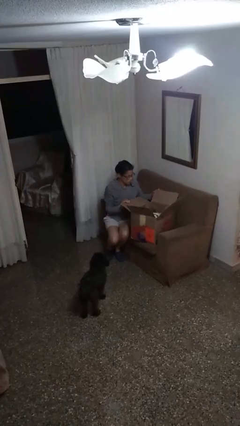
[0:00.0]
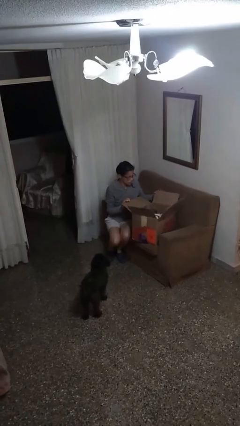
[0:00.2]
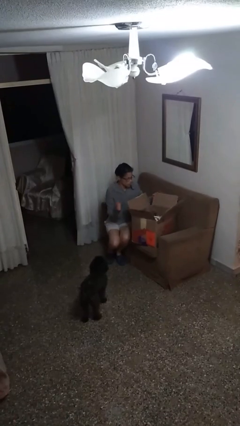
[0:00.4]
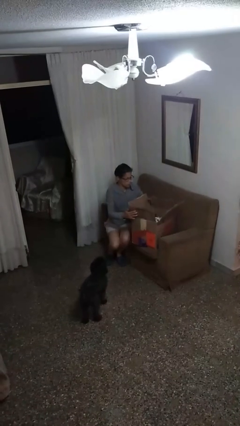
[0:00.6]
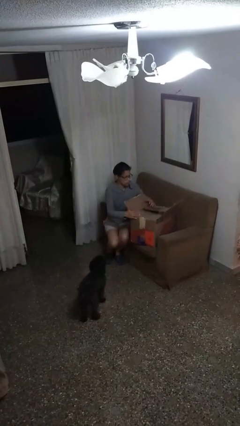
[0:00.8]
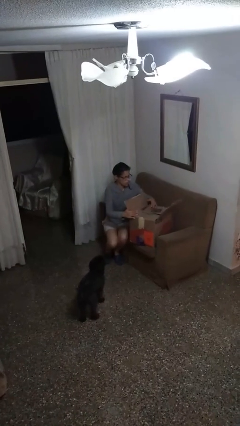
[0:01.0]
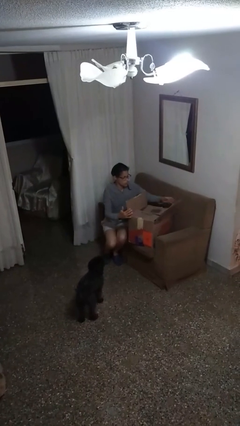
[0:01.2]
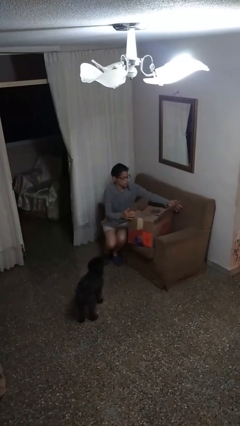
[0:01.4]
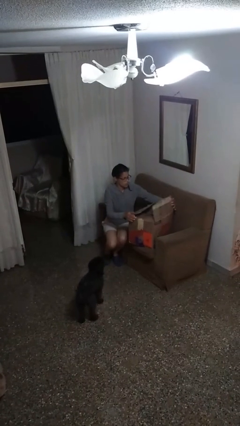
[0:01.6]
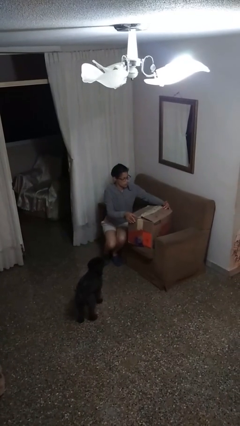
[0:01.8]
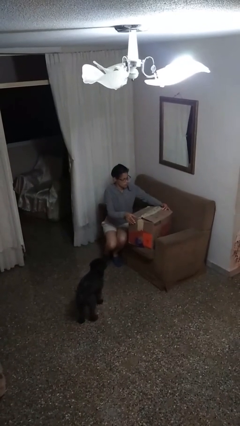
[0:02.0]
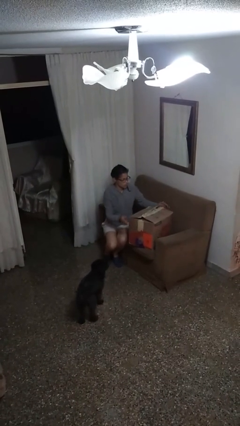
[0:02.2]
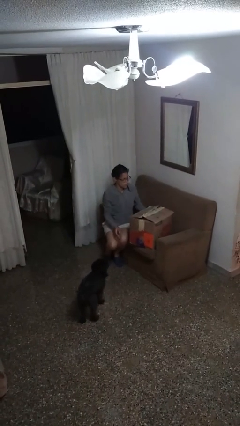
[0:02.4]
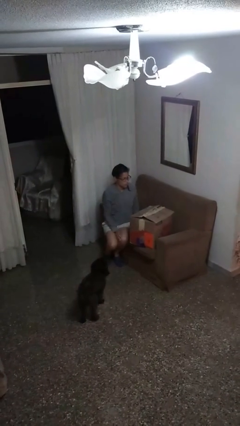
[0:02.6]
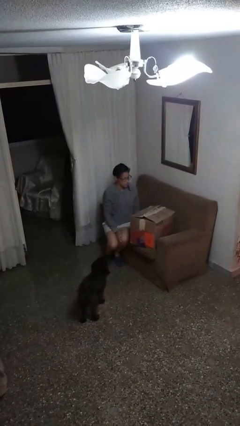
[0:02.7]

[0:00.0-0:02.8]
person closes box

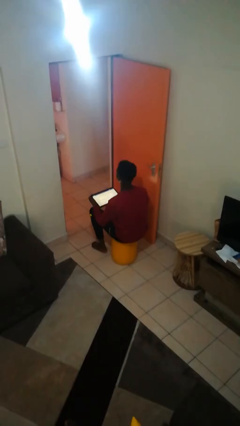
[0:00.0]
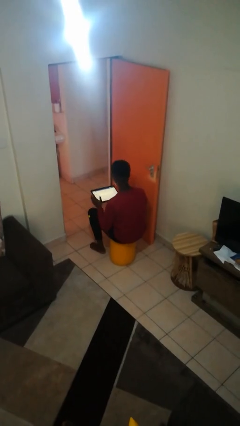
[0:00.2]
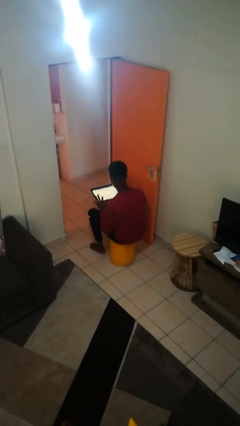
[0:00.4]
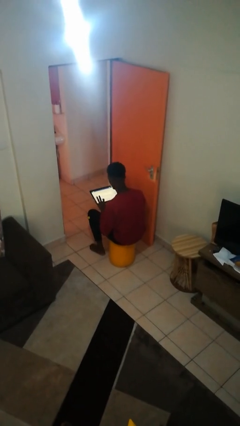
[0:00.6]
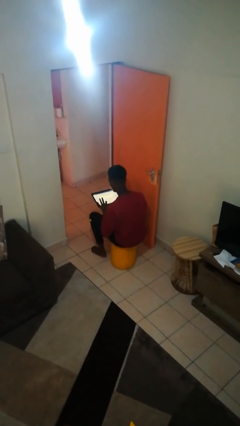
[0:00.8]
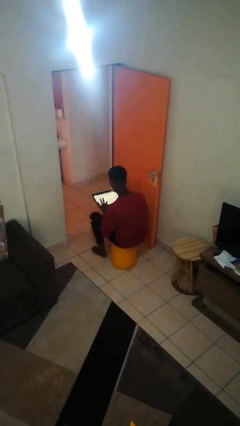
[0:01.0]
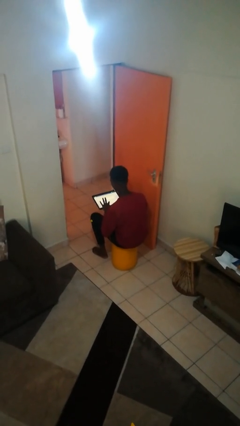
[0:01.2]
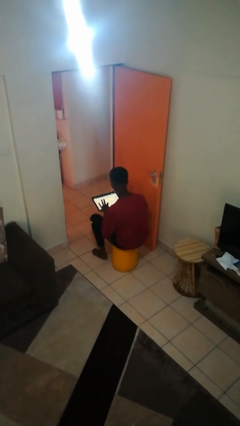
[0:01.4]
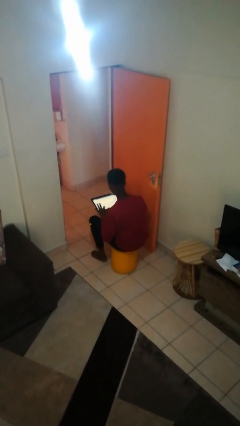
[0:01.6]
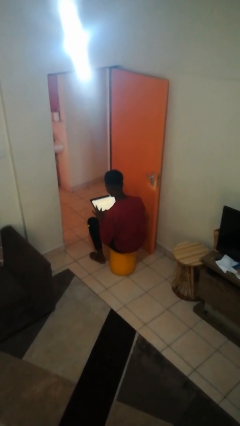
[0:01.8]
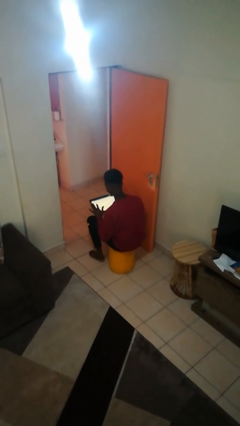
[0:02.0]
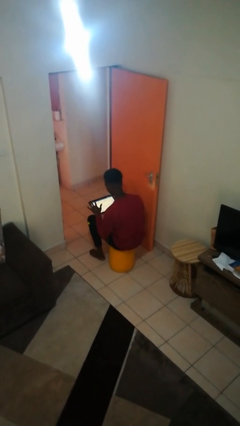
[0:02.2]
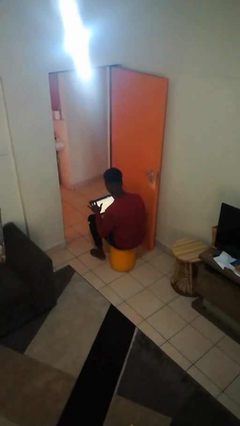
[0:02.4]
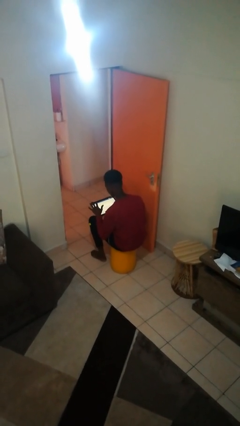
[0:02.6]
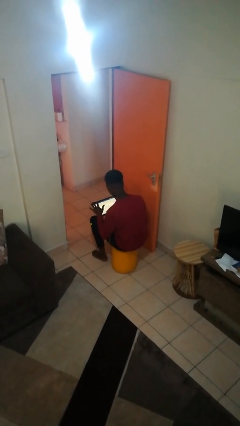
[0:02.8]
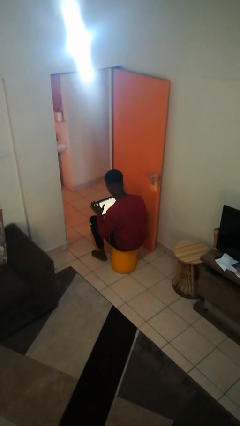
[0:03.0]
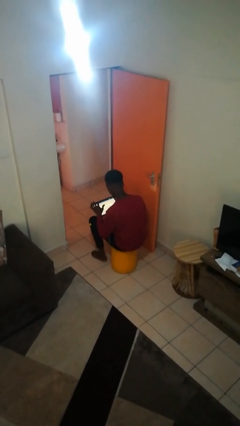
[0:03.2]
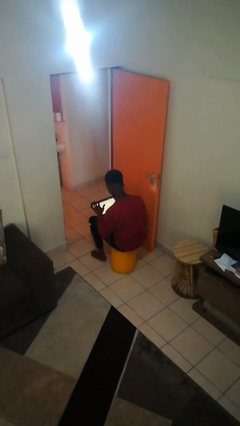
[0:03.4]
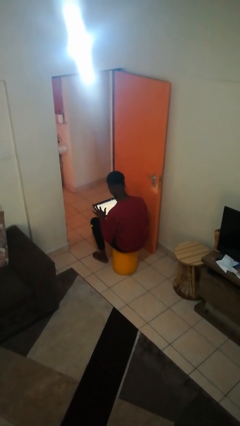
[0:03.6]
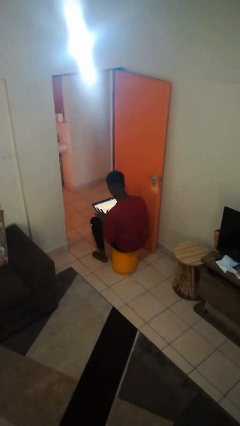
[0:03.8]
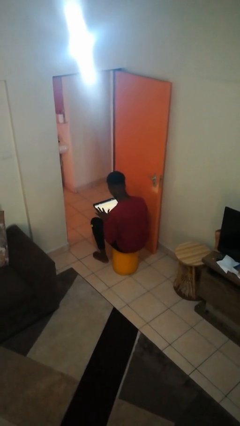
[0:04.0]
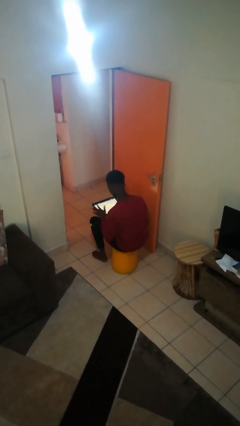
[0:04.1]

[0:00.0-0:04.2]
person interacts with tablet

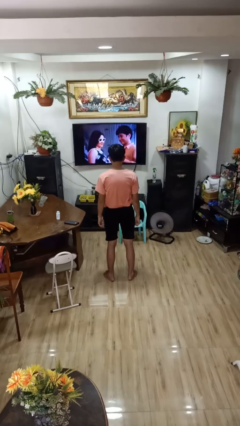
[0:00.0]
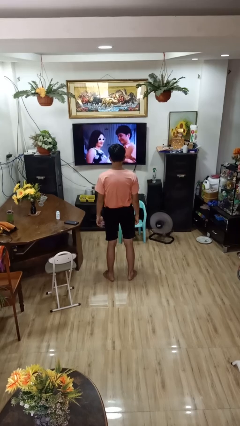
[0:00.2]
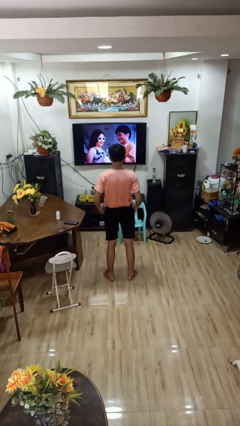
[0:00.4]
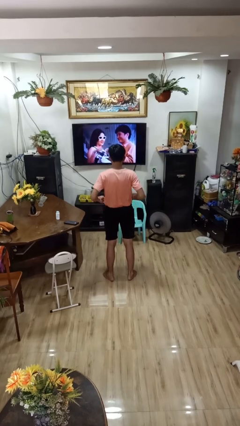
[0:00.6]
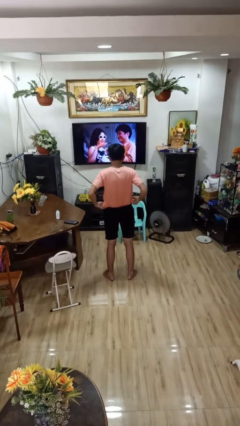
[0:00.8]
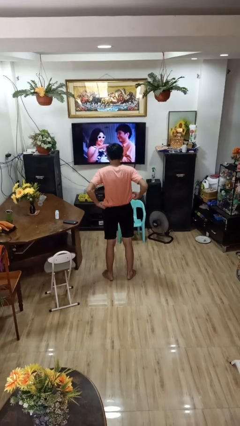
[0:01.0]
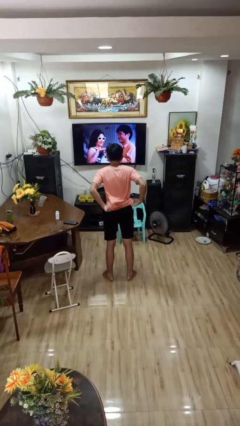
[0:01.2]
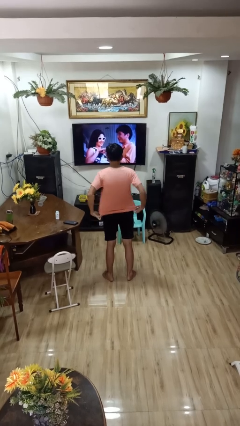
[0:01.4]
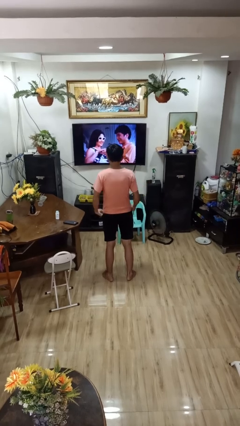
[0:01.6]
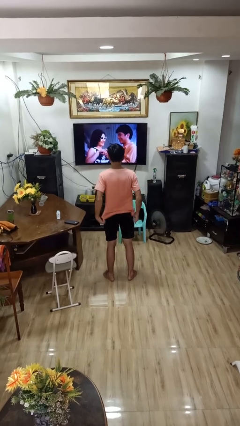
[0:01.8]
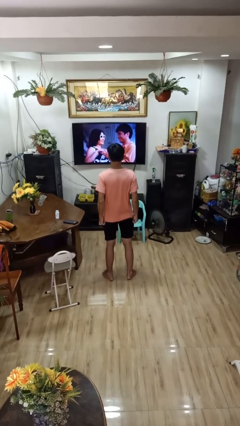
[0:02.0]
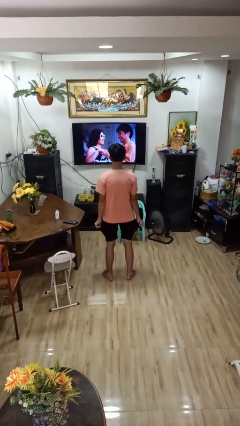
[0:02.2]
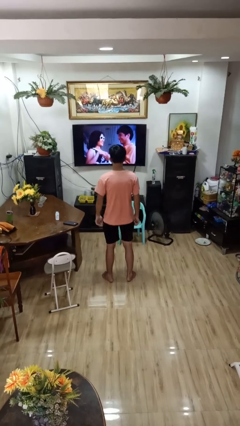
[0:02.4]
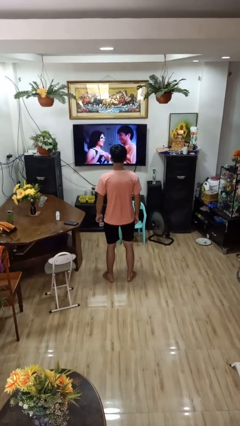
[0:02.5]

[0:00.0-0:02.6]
person untucks shirt

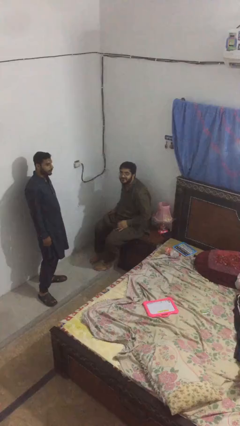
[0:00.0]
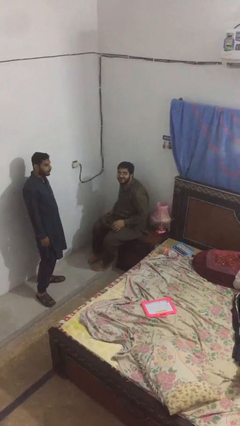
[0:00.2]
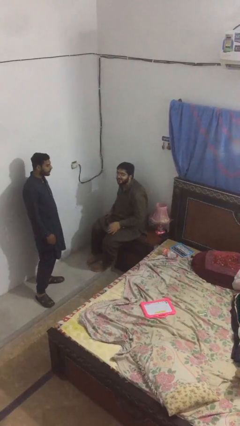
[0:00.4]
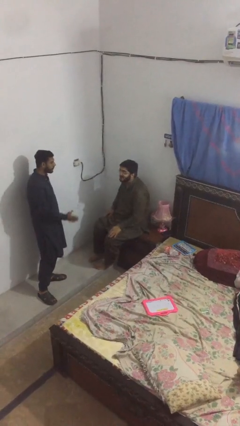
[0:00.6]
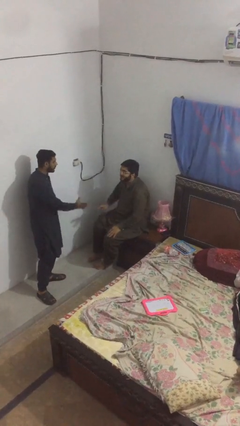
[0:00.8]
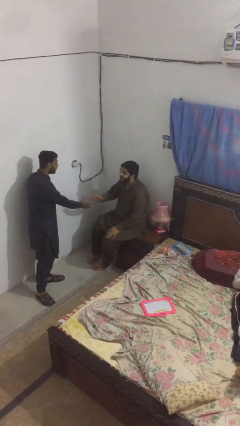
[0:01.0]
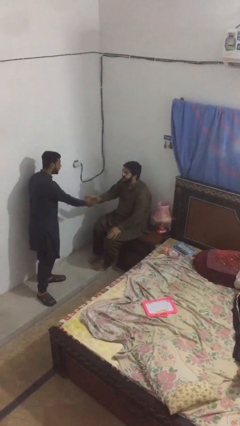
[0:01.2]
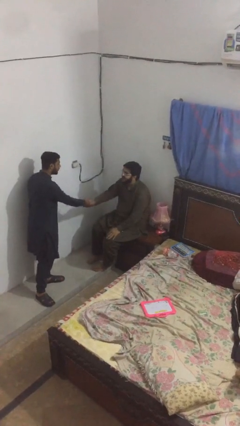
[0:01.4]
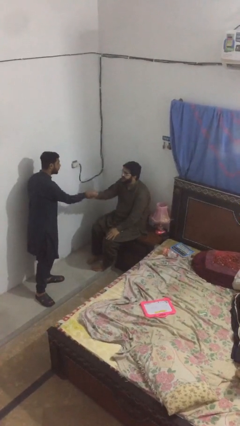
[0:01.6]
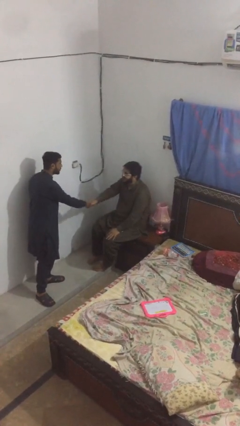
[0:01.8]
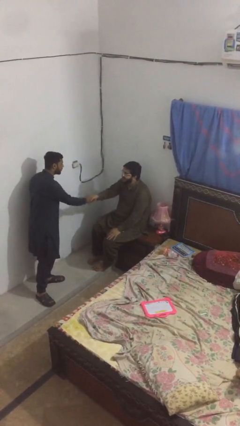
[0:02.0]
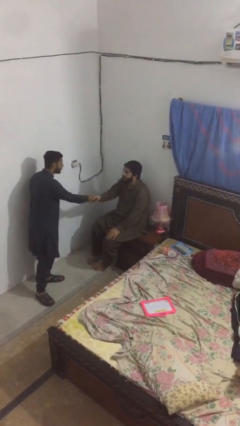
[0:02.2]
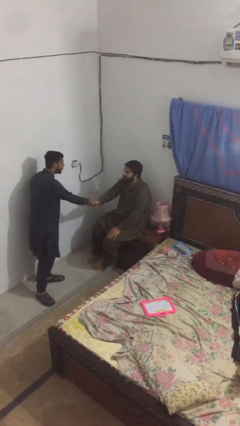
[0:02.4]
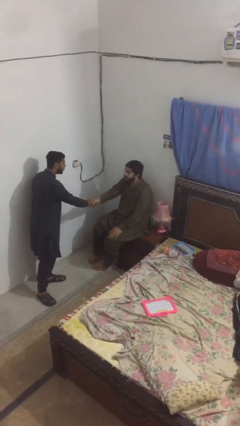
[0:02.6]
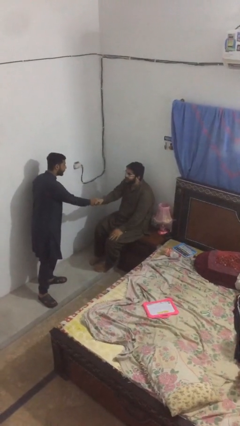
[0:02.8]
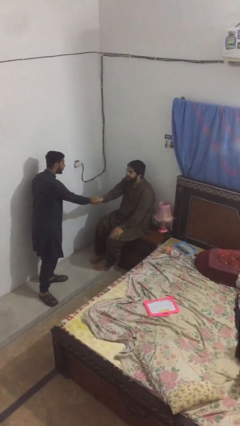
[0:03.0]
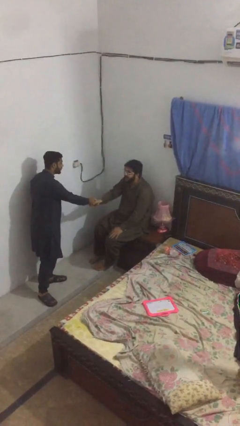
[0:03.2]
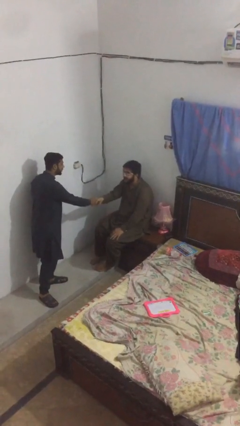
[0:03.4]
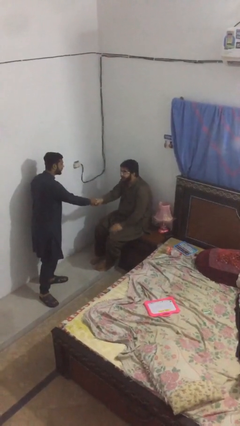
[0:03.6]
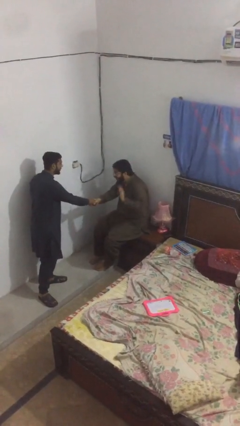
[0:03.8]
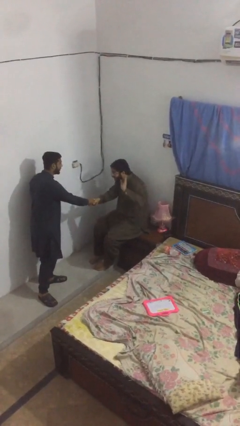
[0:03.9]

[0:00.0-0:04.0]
person shakes hand

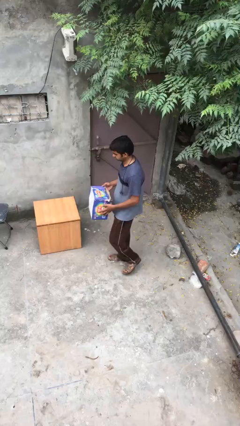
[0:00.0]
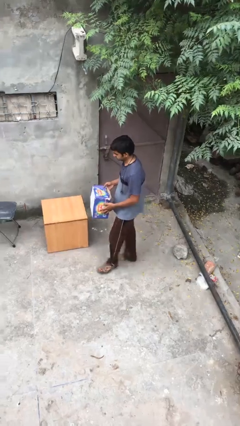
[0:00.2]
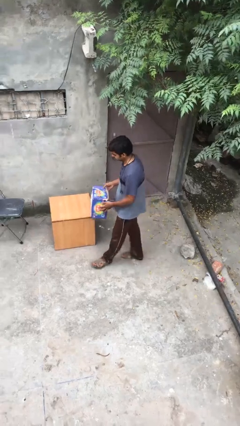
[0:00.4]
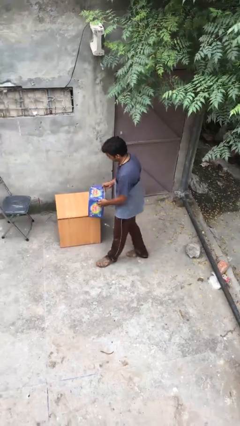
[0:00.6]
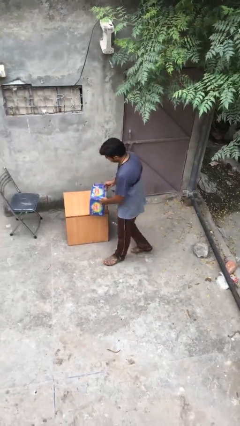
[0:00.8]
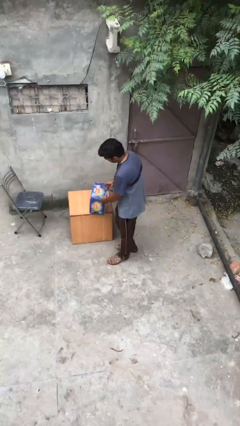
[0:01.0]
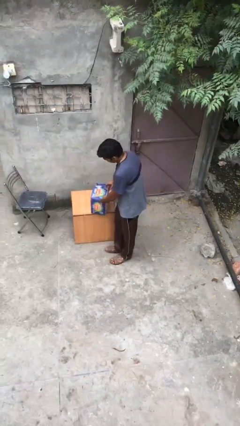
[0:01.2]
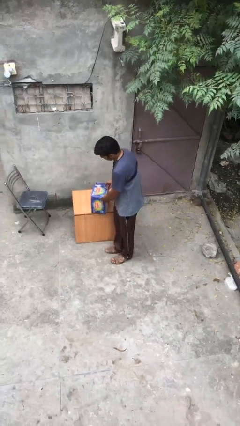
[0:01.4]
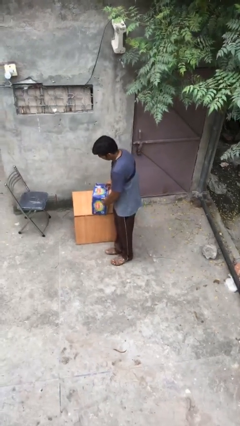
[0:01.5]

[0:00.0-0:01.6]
person puts down object on table

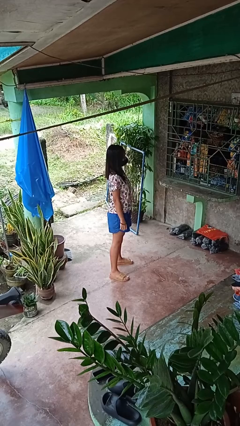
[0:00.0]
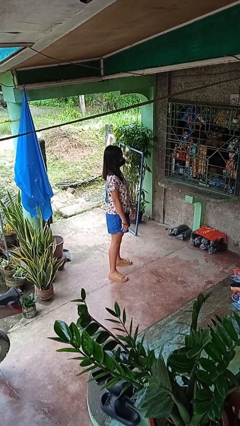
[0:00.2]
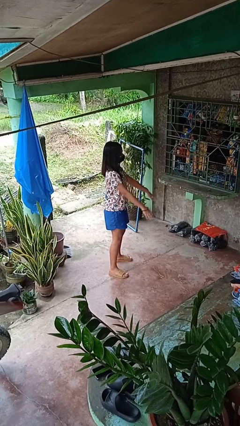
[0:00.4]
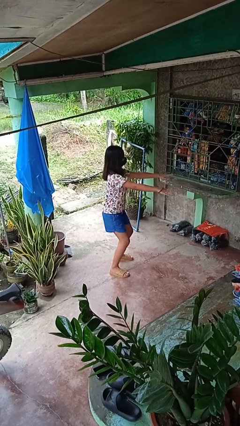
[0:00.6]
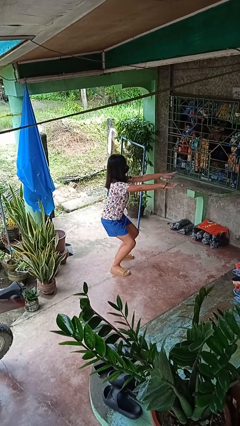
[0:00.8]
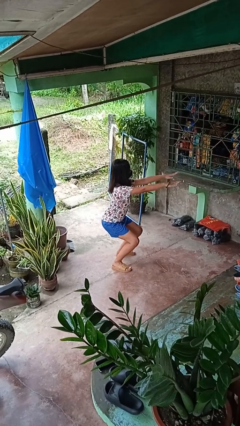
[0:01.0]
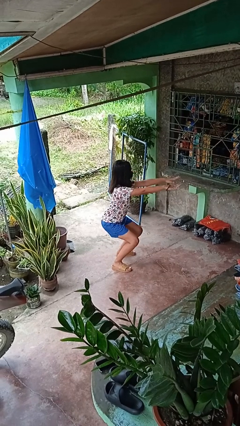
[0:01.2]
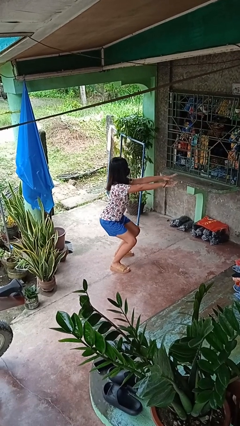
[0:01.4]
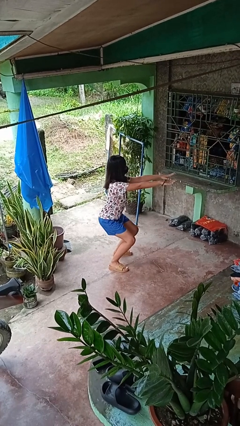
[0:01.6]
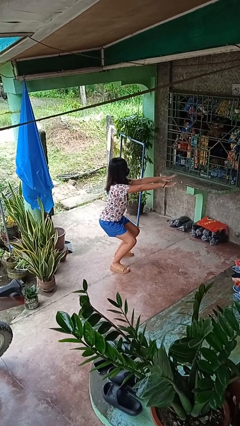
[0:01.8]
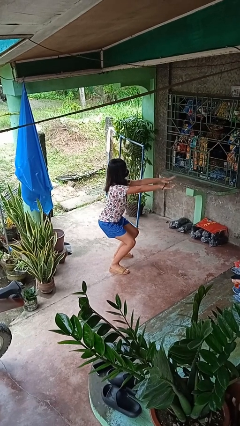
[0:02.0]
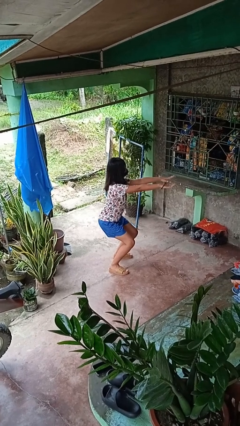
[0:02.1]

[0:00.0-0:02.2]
person squats
